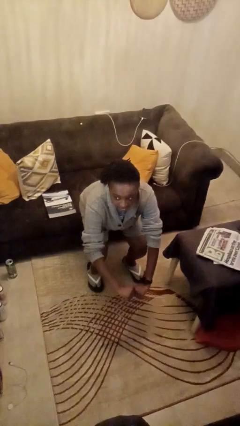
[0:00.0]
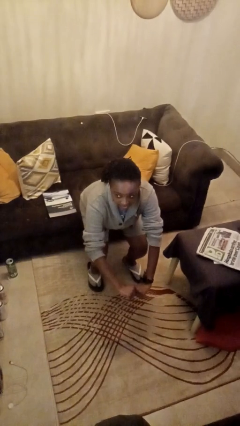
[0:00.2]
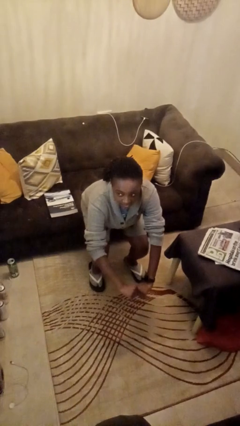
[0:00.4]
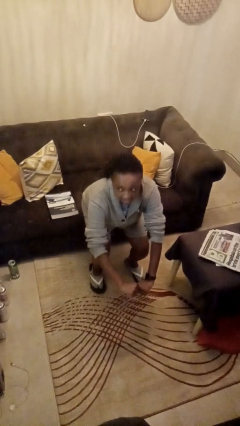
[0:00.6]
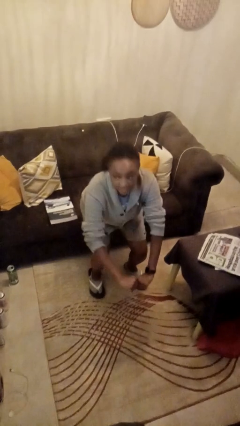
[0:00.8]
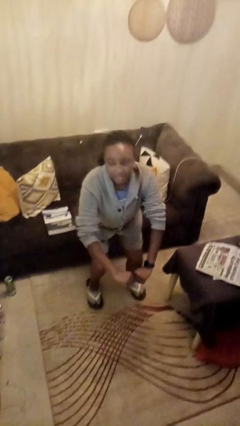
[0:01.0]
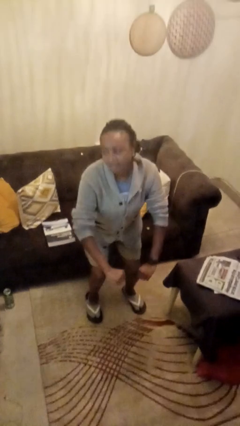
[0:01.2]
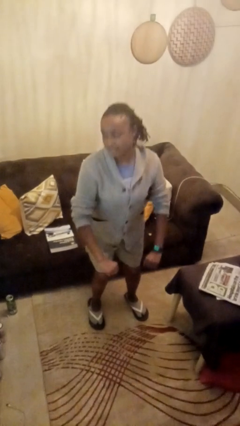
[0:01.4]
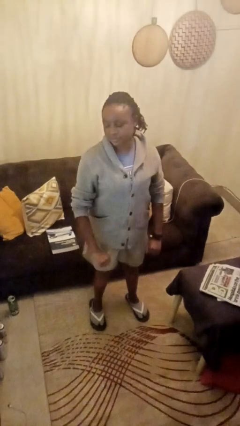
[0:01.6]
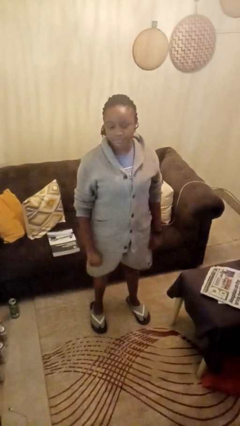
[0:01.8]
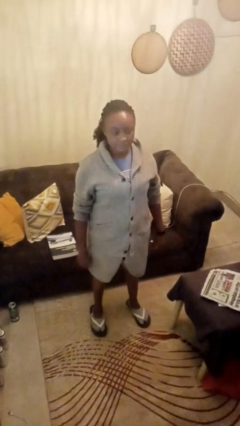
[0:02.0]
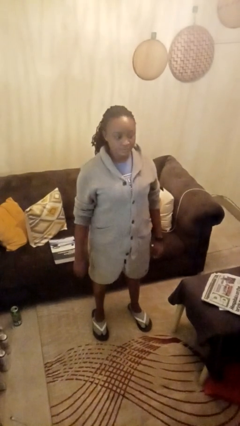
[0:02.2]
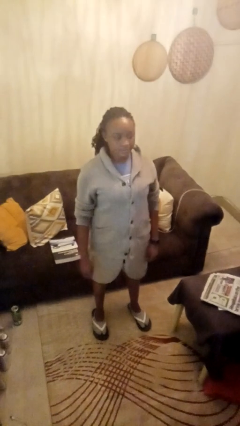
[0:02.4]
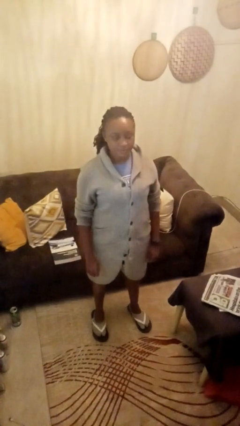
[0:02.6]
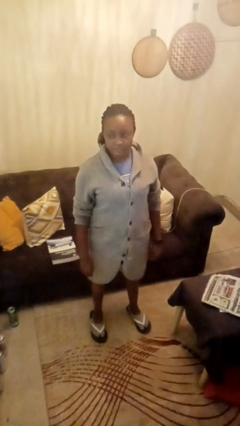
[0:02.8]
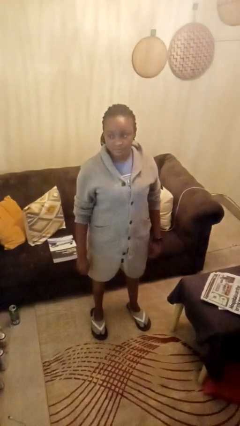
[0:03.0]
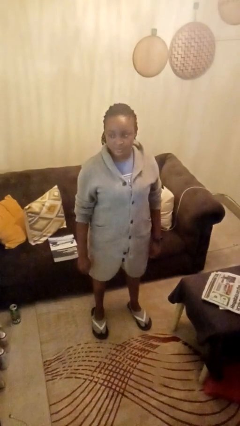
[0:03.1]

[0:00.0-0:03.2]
person stands up

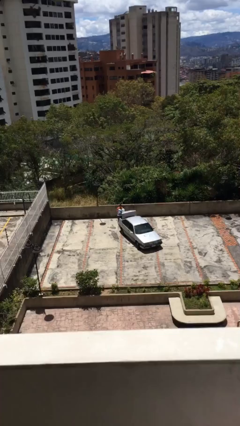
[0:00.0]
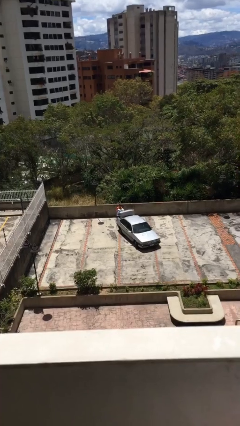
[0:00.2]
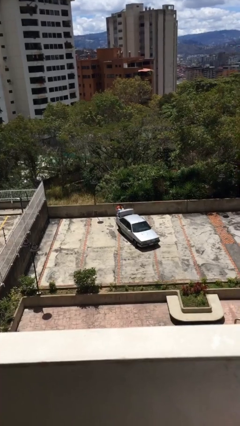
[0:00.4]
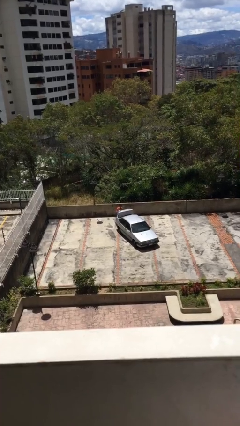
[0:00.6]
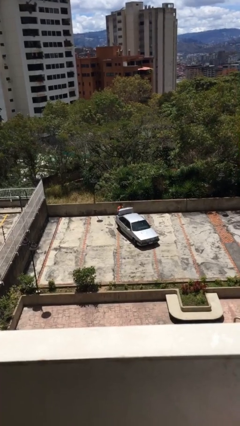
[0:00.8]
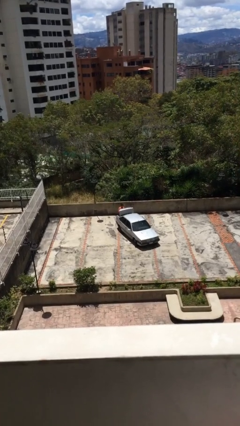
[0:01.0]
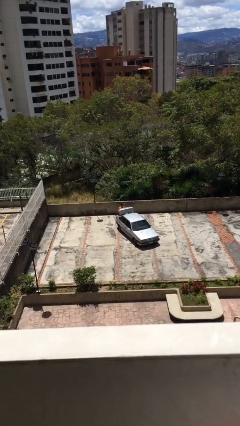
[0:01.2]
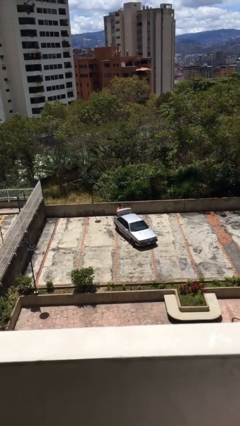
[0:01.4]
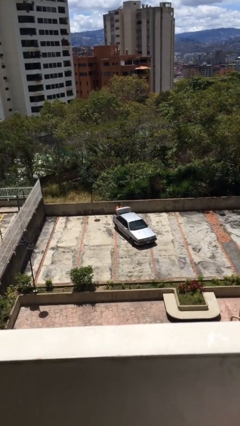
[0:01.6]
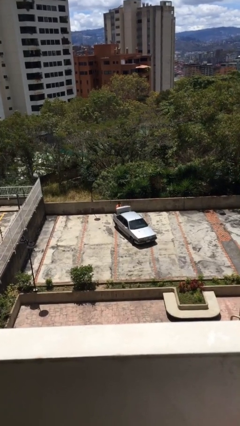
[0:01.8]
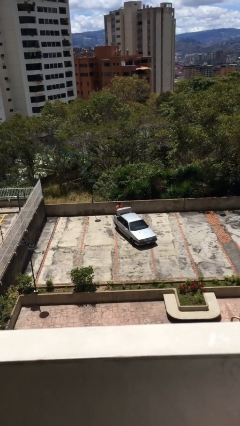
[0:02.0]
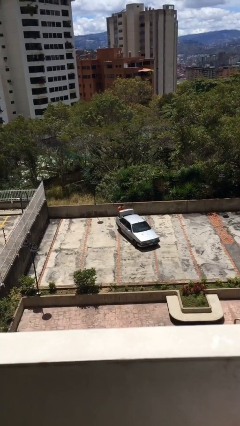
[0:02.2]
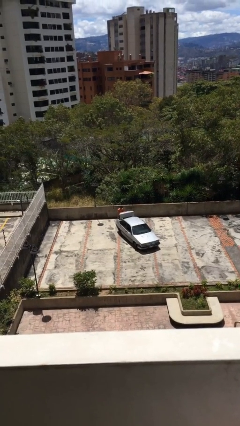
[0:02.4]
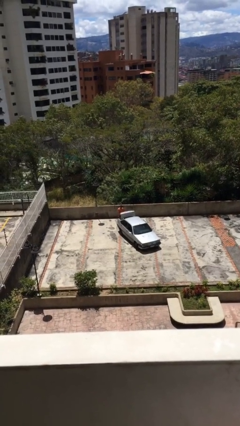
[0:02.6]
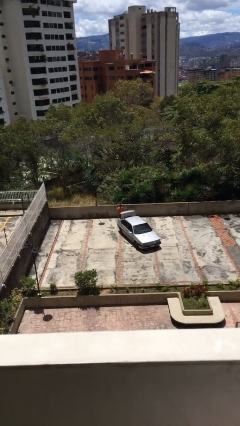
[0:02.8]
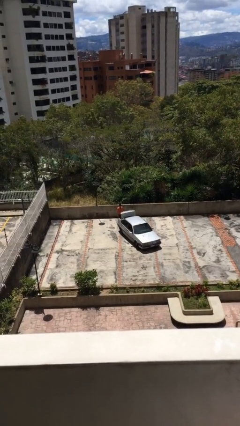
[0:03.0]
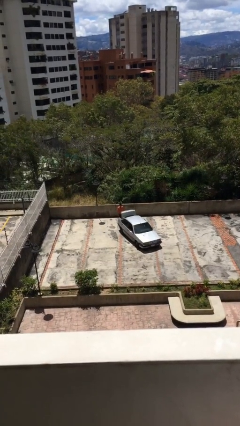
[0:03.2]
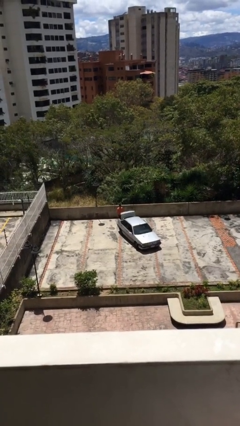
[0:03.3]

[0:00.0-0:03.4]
person loads car

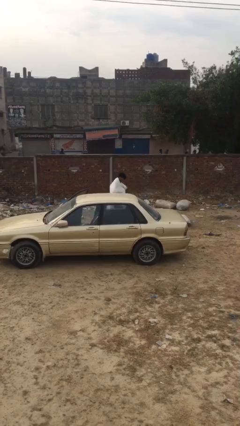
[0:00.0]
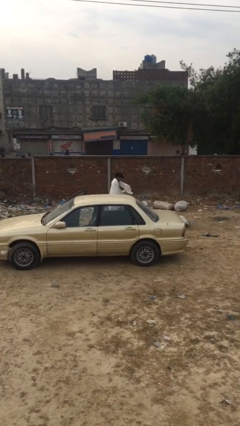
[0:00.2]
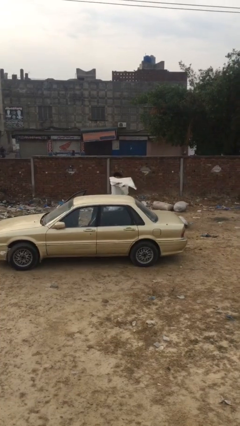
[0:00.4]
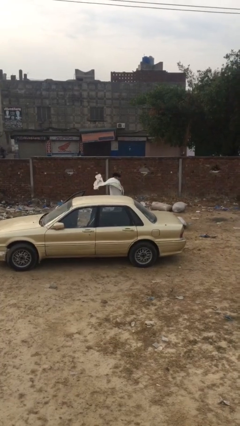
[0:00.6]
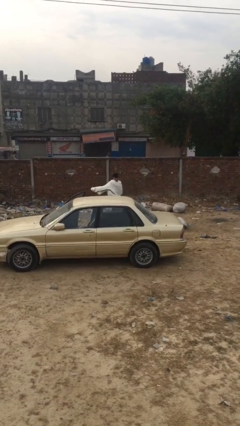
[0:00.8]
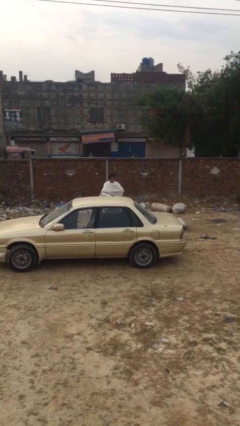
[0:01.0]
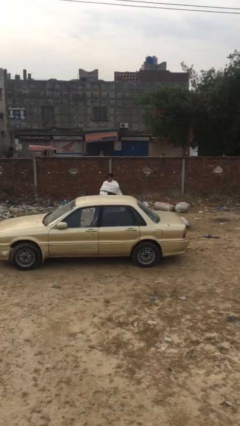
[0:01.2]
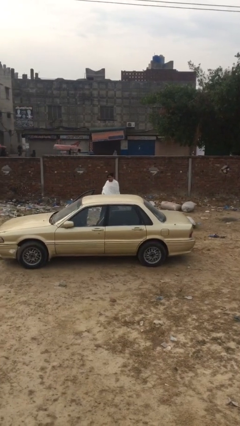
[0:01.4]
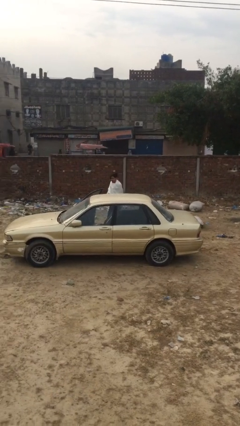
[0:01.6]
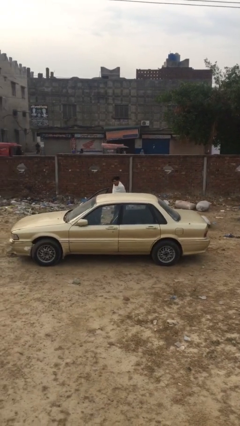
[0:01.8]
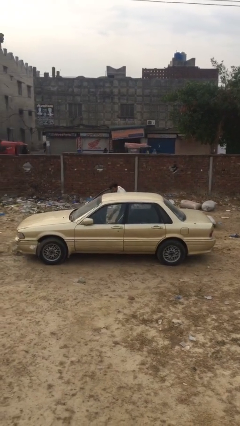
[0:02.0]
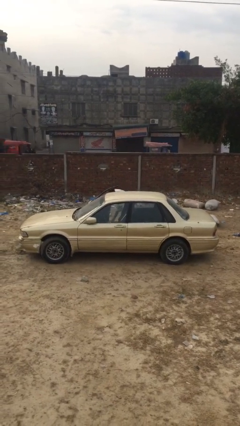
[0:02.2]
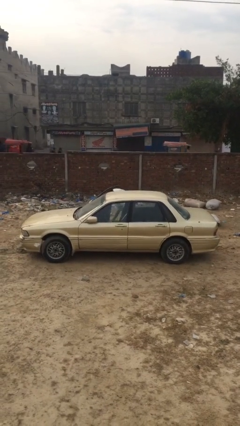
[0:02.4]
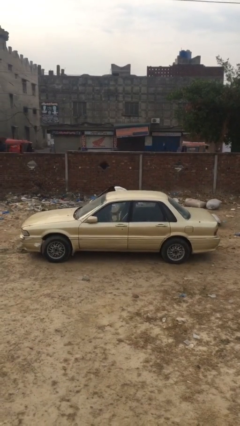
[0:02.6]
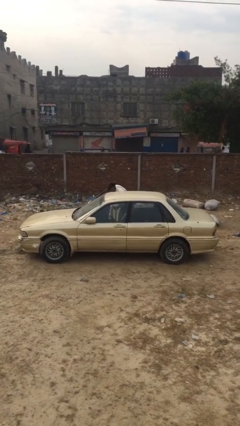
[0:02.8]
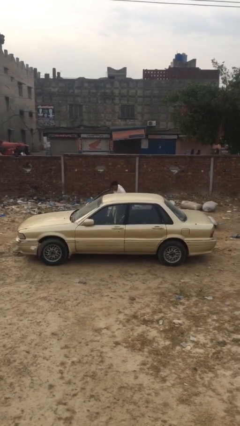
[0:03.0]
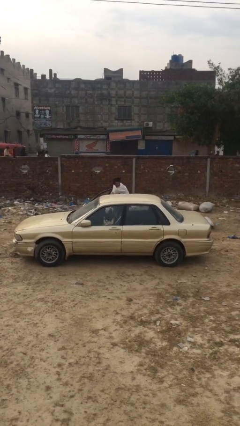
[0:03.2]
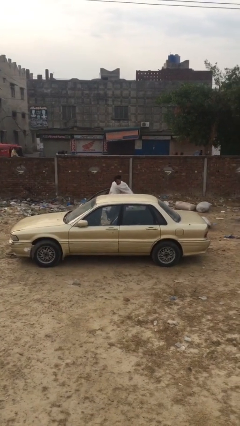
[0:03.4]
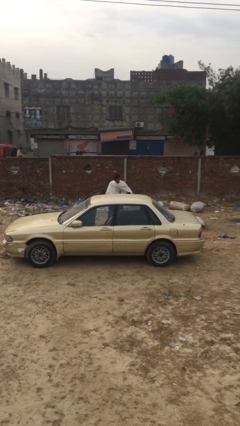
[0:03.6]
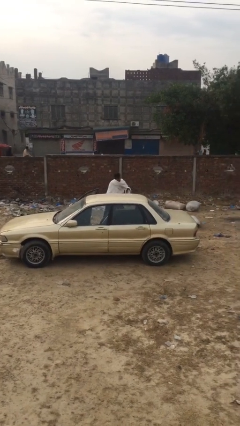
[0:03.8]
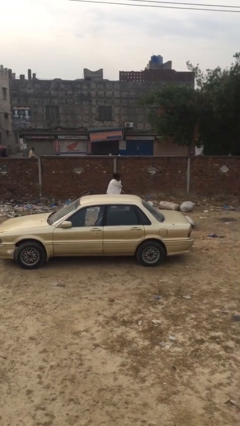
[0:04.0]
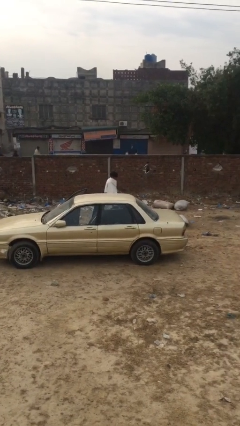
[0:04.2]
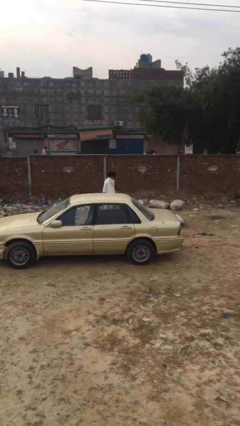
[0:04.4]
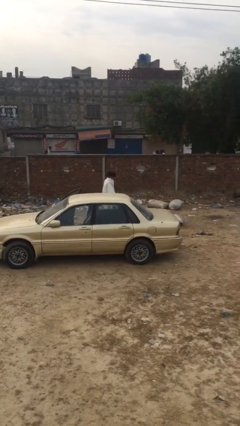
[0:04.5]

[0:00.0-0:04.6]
person unloads car

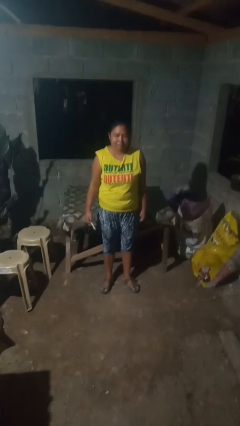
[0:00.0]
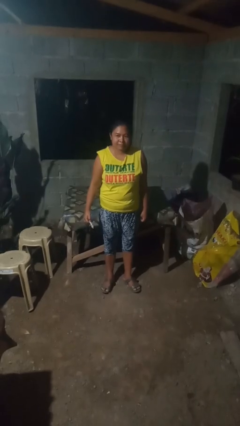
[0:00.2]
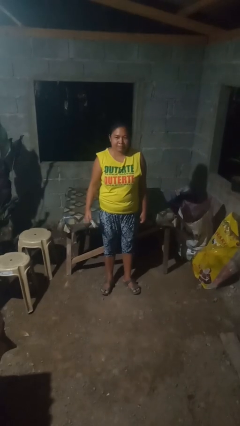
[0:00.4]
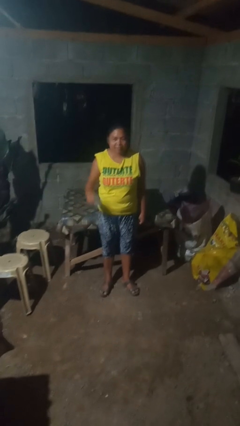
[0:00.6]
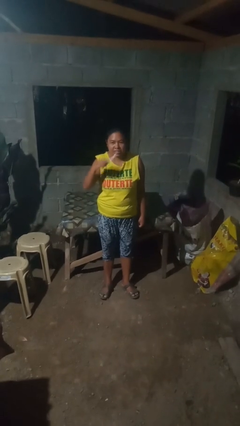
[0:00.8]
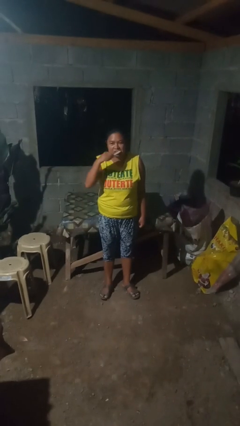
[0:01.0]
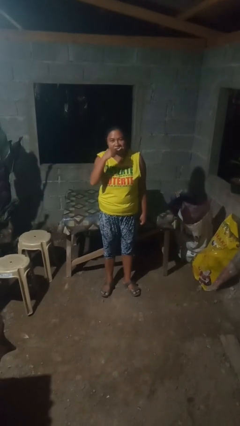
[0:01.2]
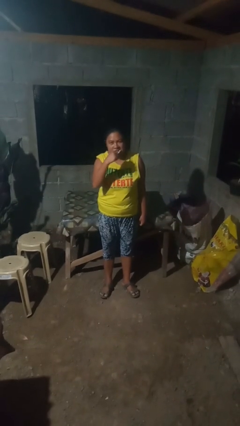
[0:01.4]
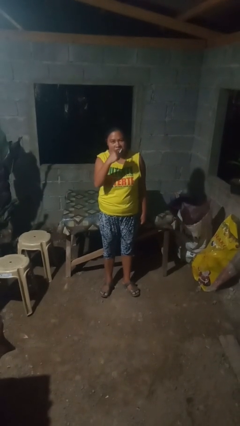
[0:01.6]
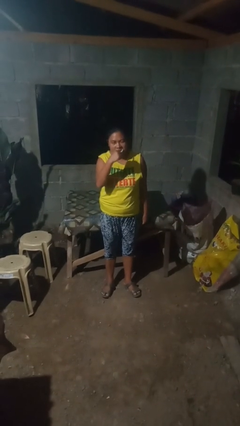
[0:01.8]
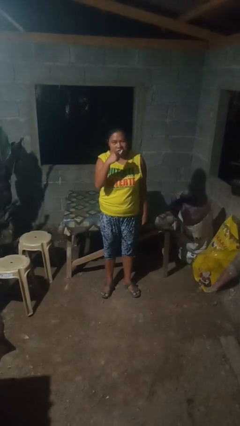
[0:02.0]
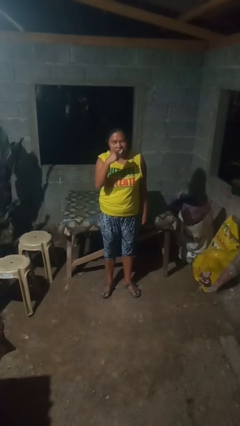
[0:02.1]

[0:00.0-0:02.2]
person brushes teeth

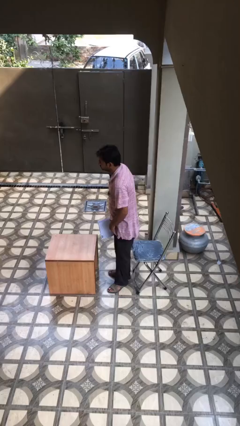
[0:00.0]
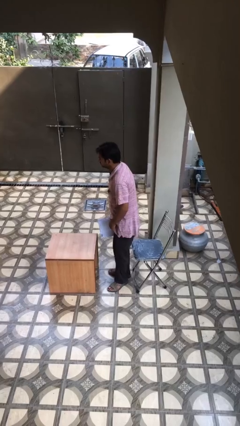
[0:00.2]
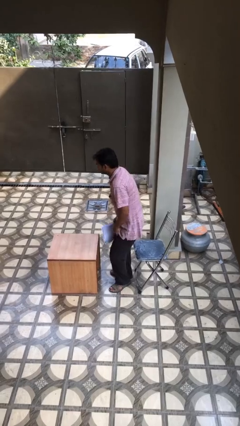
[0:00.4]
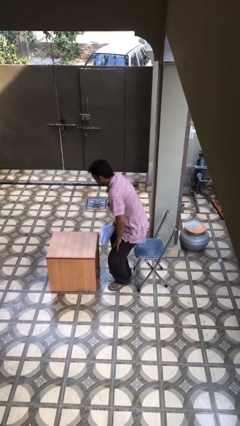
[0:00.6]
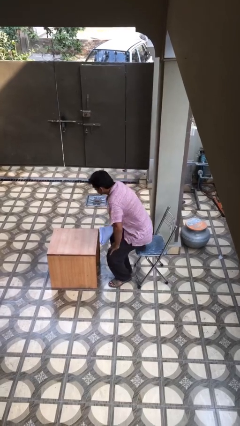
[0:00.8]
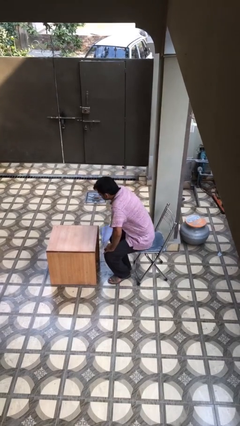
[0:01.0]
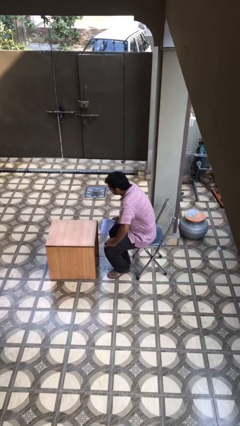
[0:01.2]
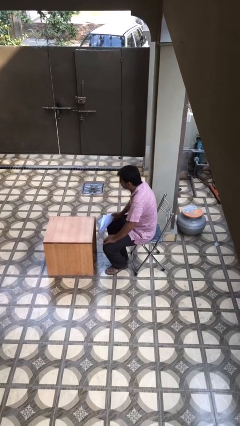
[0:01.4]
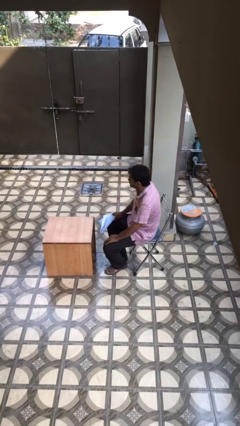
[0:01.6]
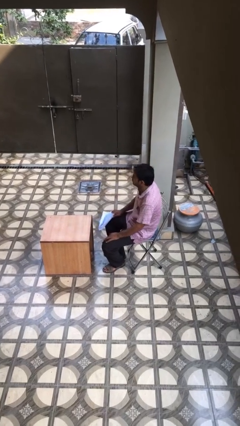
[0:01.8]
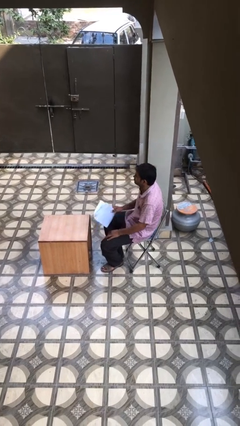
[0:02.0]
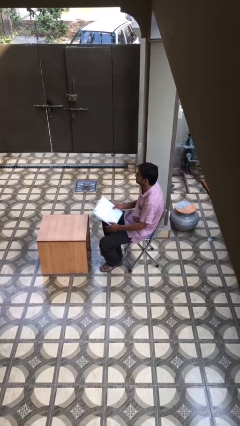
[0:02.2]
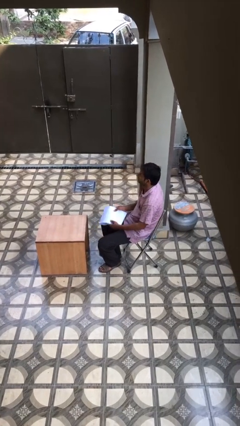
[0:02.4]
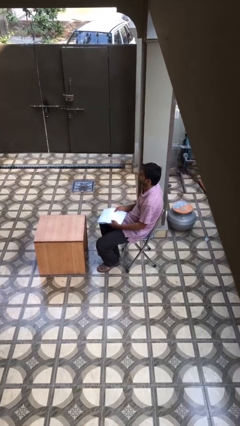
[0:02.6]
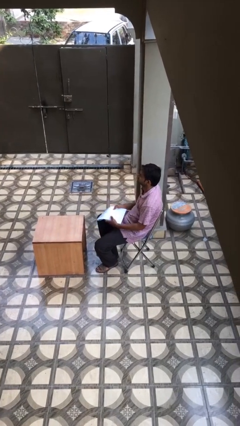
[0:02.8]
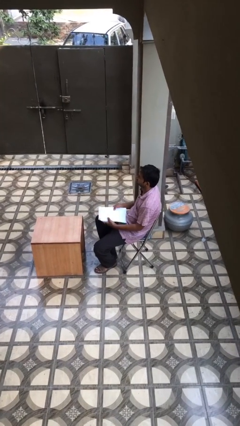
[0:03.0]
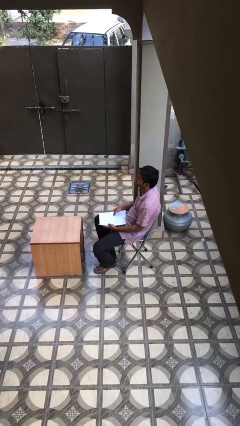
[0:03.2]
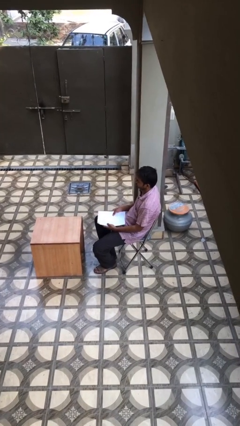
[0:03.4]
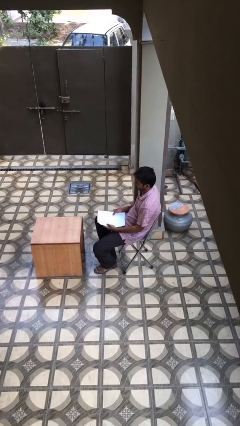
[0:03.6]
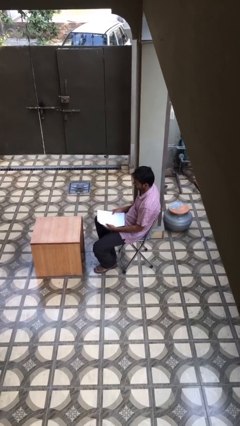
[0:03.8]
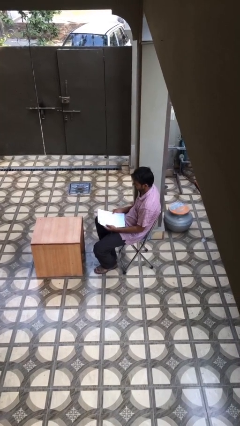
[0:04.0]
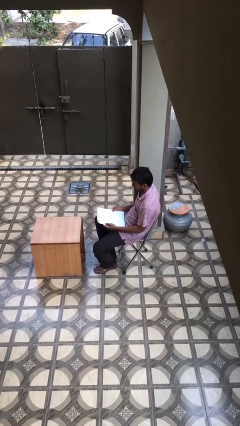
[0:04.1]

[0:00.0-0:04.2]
person sits down

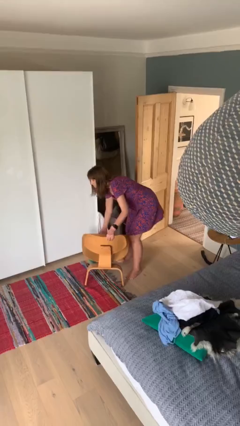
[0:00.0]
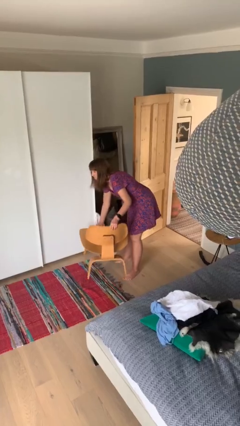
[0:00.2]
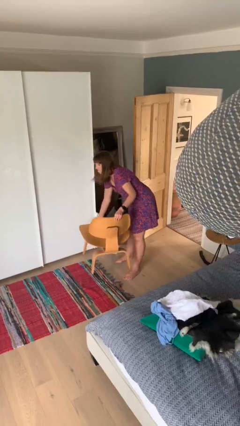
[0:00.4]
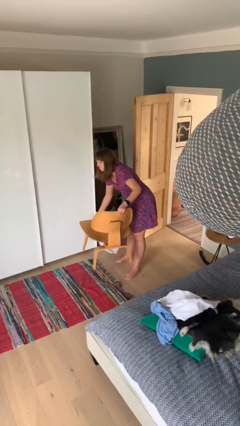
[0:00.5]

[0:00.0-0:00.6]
person picks up object from floor
